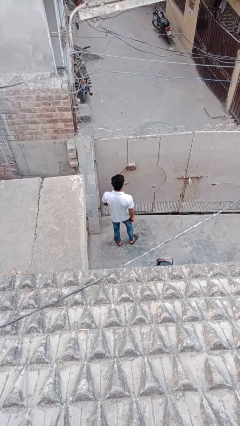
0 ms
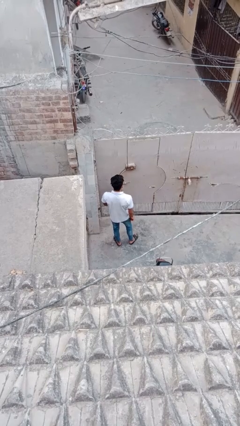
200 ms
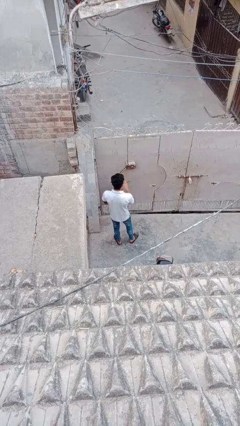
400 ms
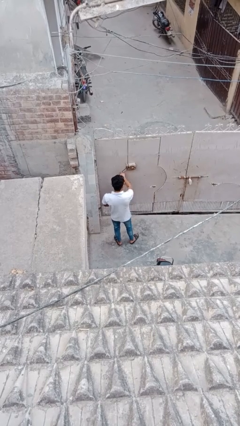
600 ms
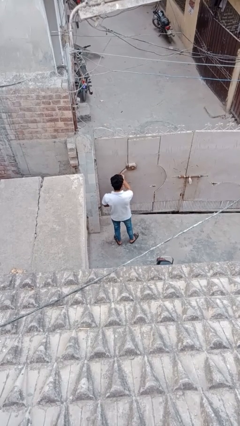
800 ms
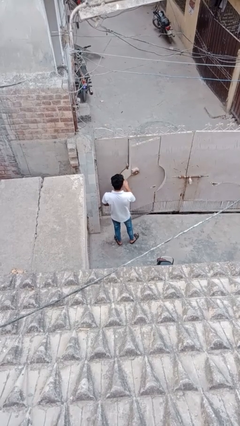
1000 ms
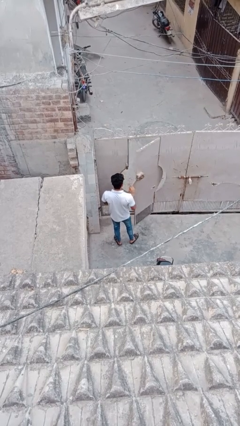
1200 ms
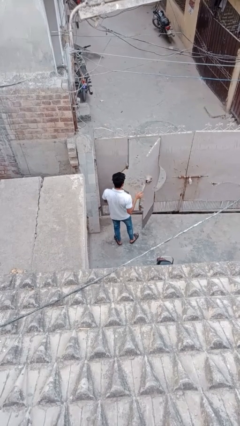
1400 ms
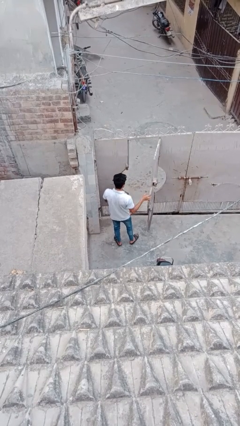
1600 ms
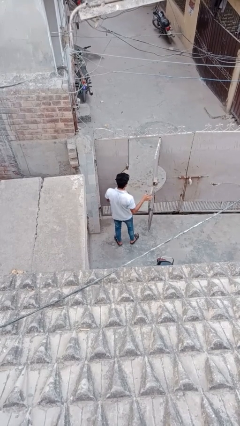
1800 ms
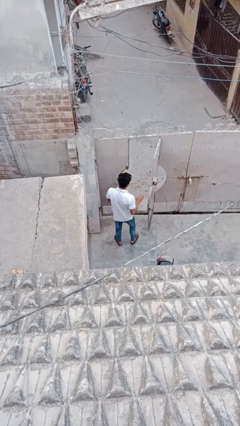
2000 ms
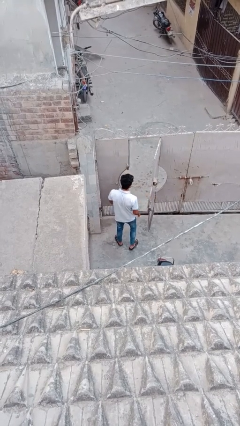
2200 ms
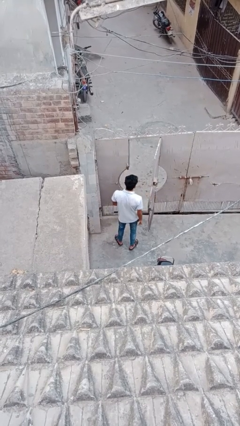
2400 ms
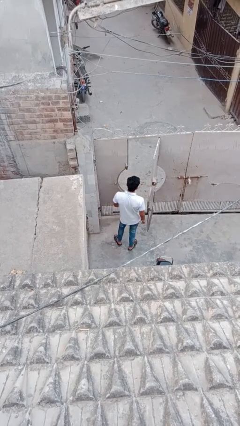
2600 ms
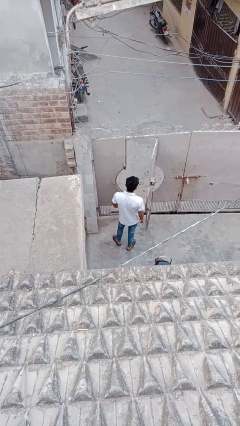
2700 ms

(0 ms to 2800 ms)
person opens facility door

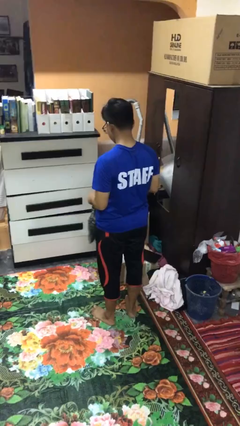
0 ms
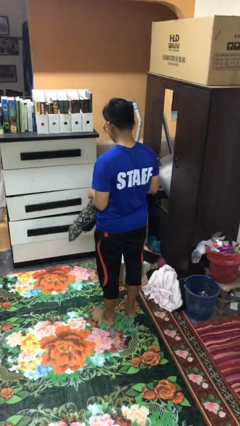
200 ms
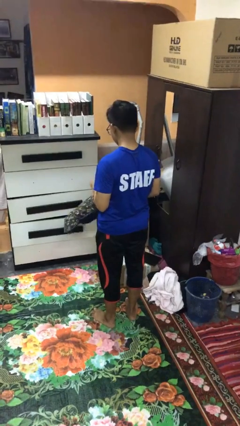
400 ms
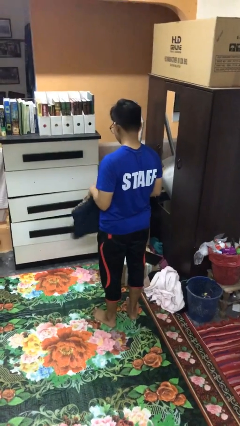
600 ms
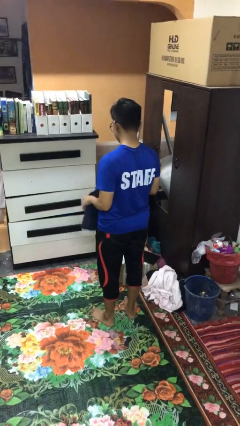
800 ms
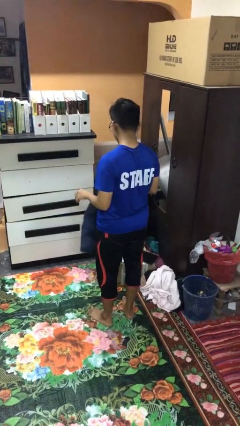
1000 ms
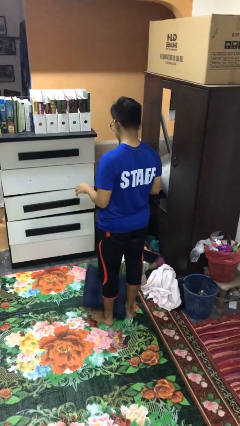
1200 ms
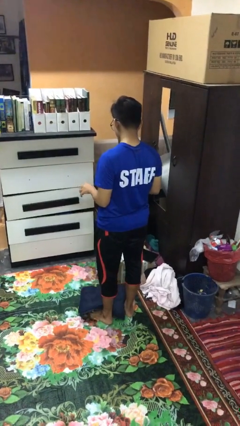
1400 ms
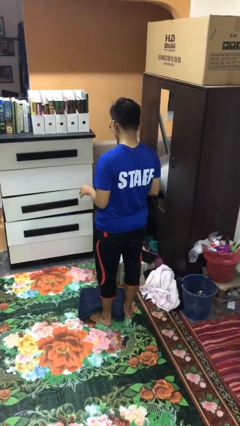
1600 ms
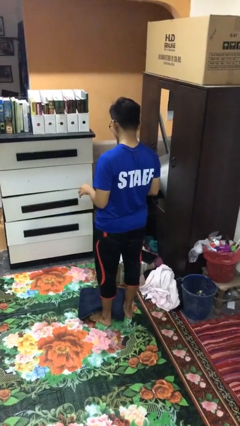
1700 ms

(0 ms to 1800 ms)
person drops object

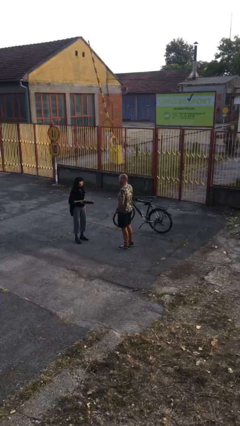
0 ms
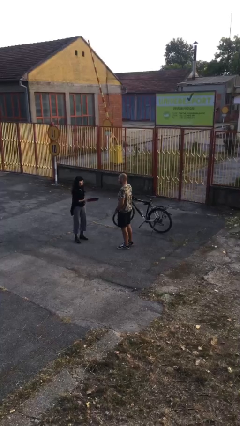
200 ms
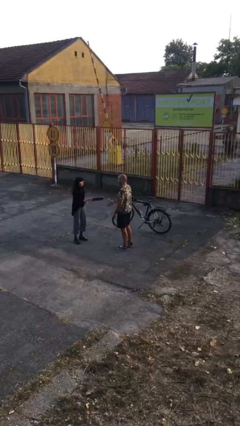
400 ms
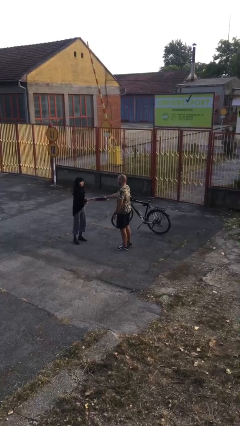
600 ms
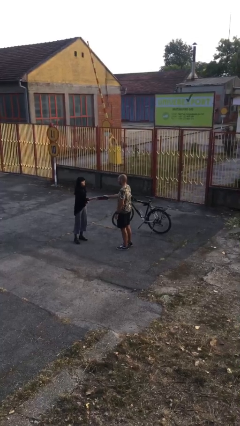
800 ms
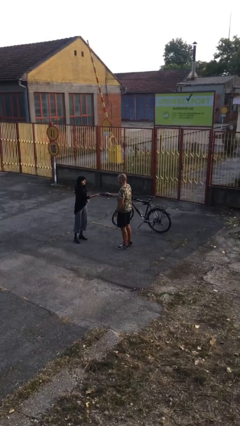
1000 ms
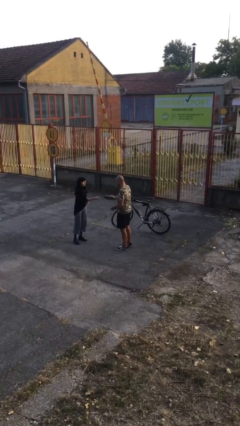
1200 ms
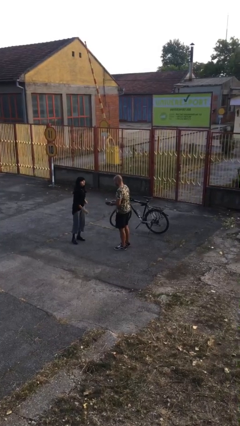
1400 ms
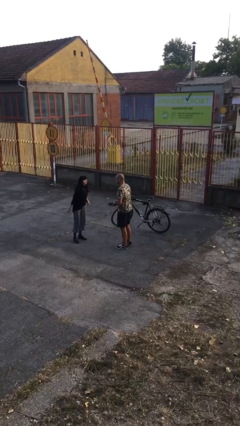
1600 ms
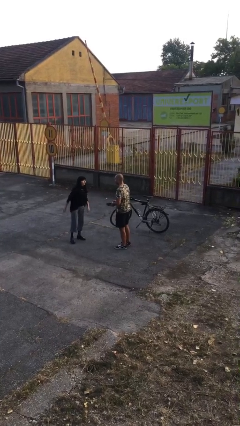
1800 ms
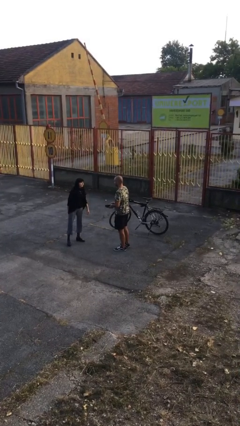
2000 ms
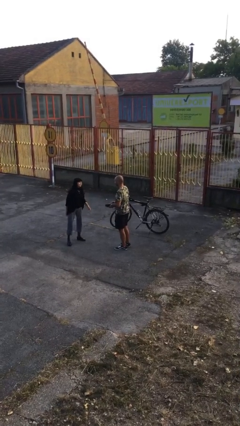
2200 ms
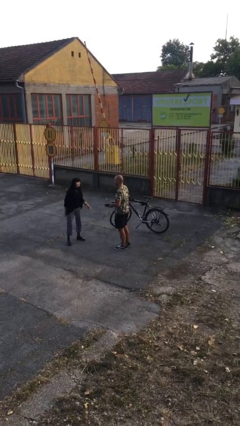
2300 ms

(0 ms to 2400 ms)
person transfers object to person

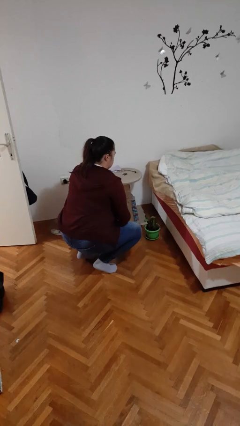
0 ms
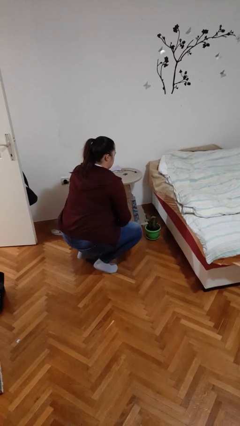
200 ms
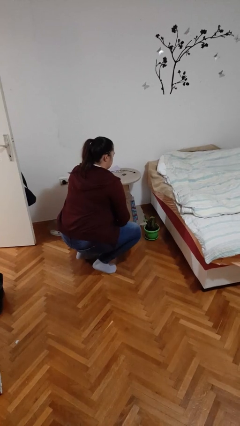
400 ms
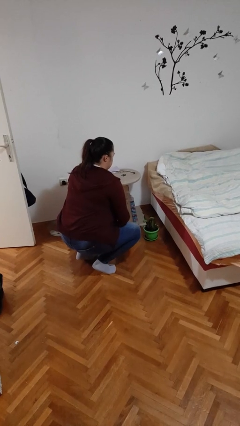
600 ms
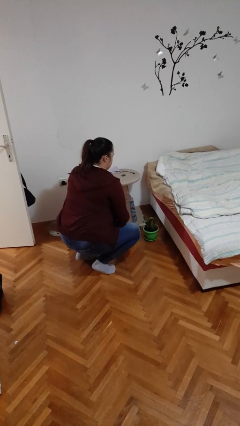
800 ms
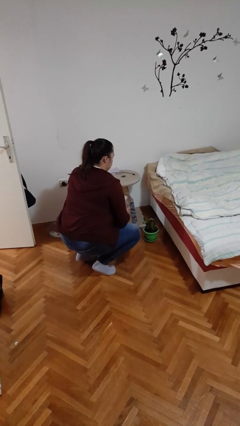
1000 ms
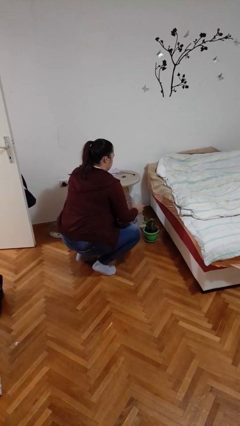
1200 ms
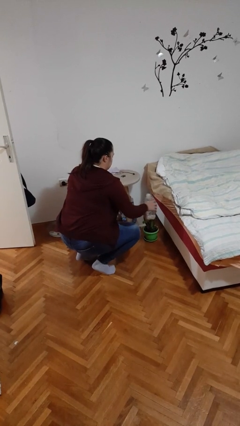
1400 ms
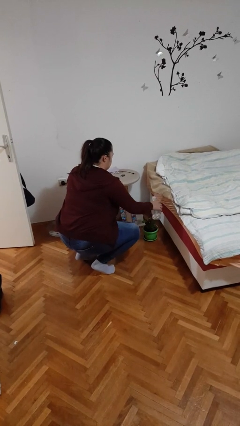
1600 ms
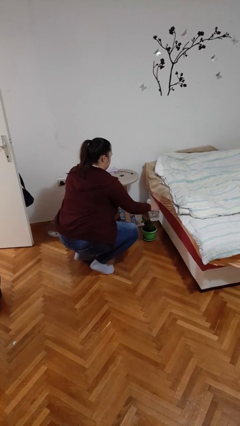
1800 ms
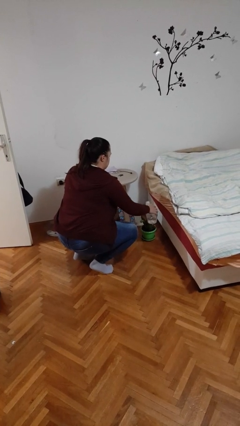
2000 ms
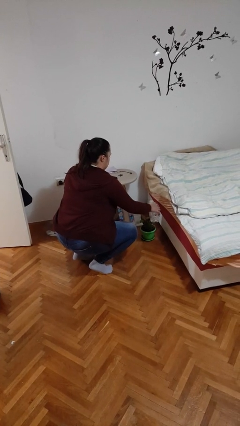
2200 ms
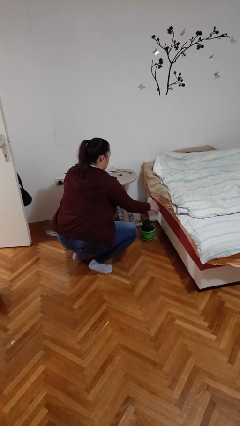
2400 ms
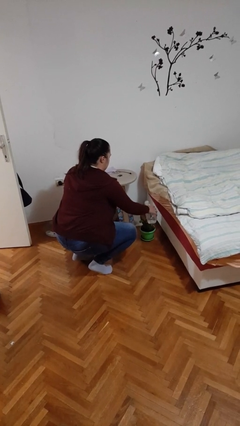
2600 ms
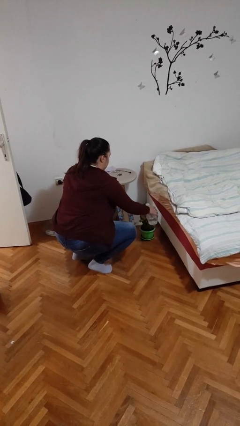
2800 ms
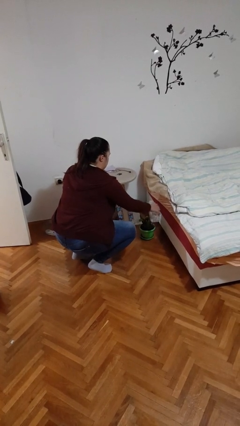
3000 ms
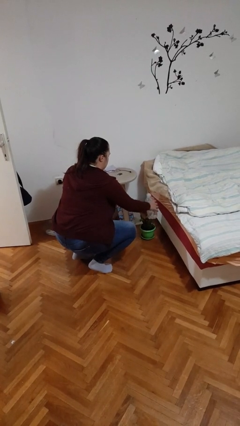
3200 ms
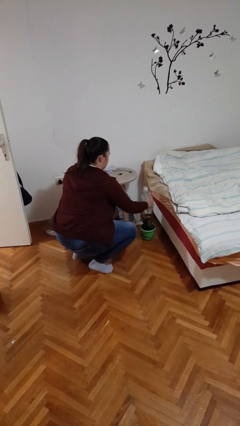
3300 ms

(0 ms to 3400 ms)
person waters houseplant

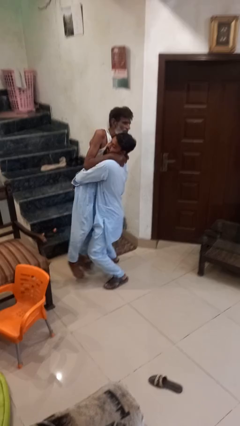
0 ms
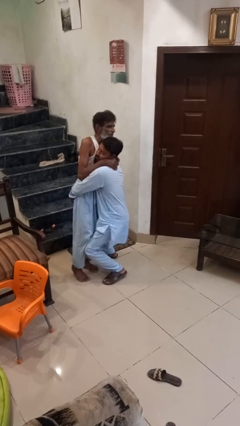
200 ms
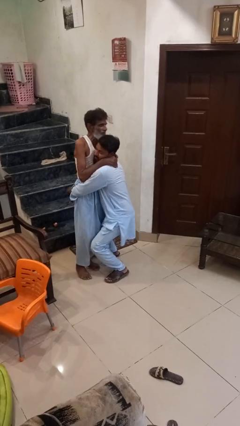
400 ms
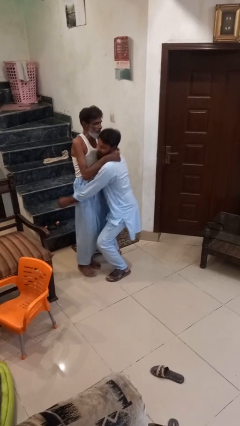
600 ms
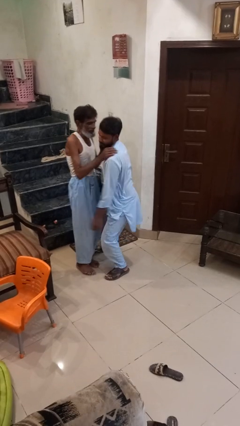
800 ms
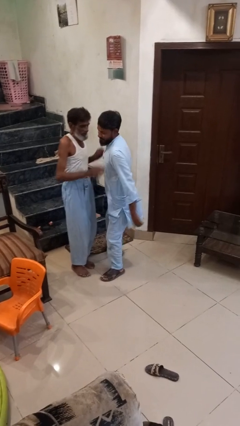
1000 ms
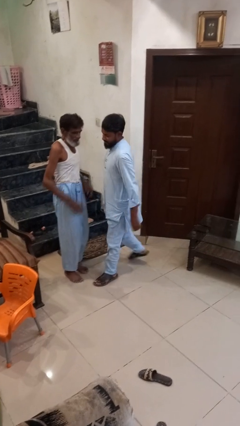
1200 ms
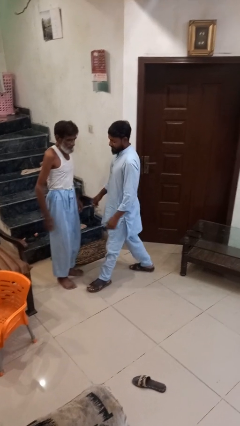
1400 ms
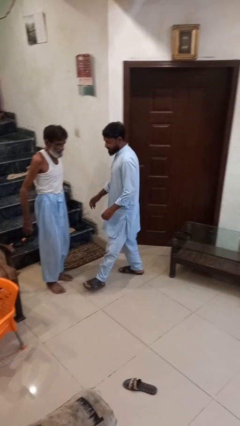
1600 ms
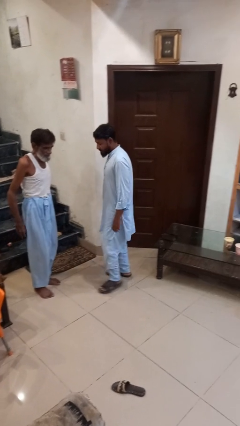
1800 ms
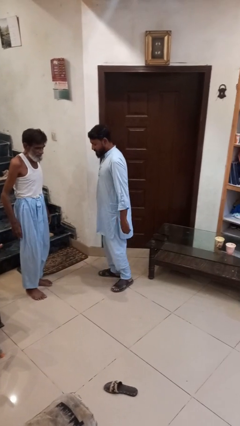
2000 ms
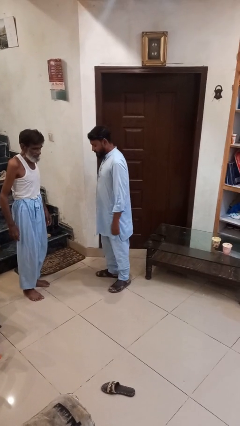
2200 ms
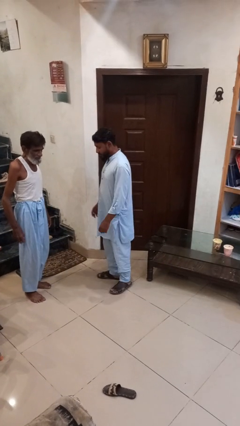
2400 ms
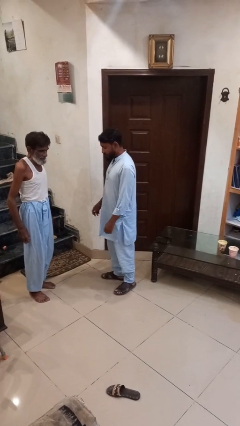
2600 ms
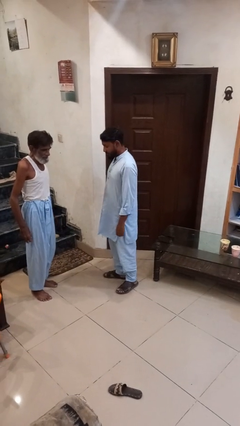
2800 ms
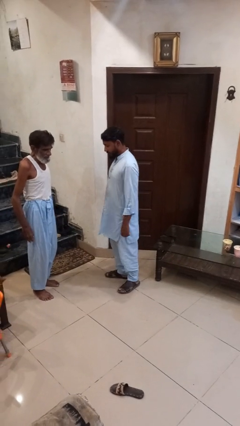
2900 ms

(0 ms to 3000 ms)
person puts down person

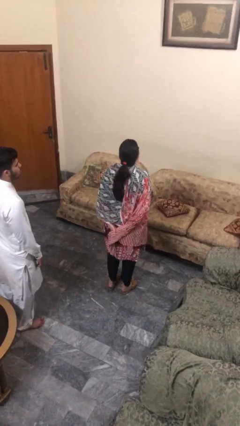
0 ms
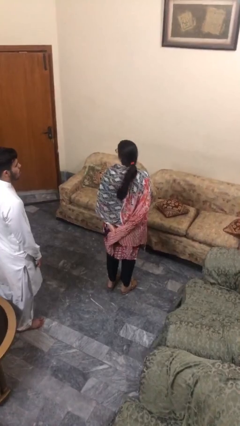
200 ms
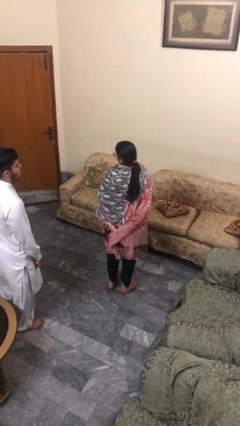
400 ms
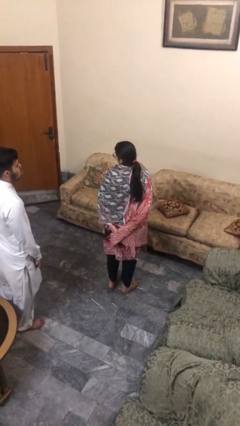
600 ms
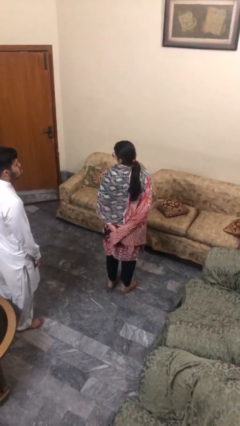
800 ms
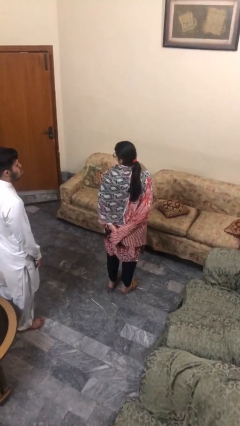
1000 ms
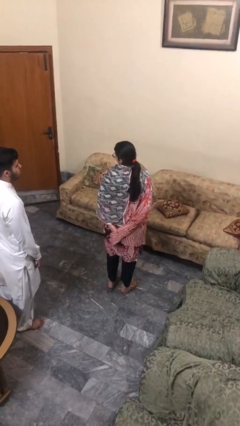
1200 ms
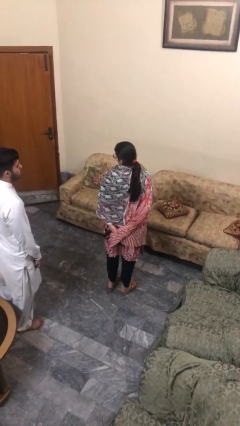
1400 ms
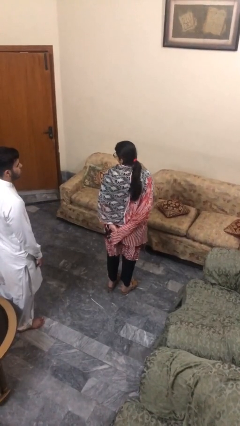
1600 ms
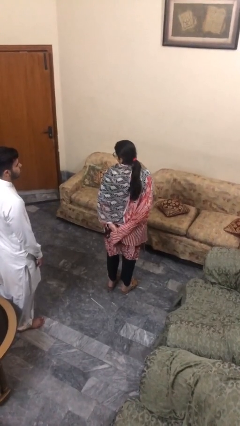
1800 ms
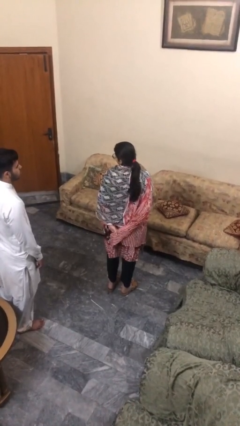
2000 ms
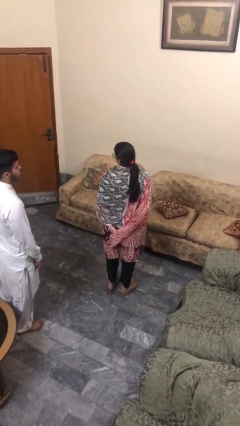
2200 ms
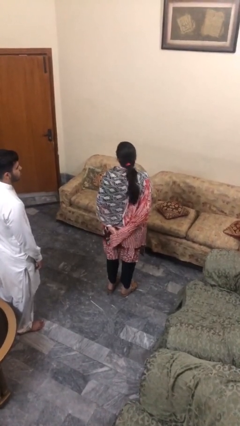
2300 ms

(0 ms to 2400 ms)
person looks over shoulder

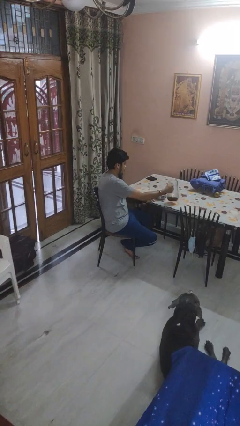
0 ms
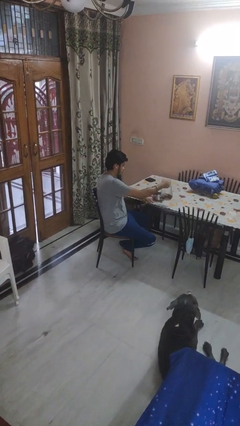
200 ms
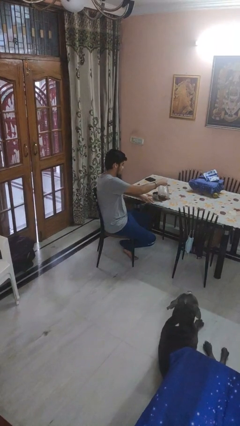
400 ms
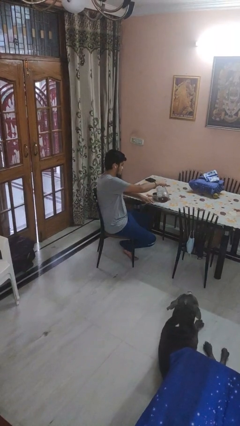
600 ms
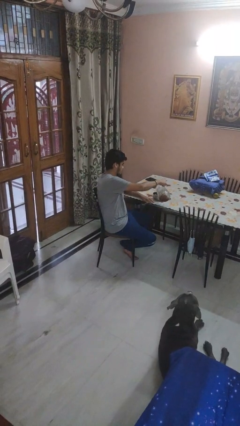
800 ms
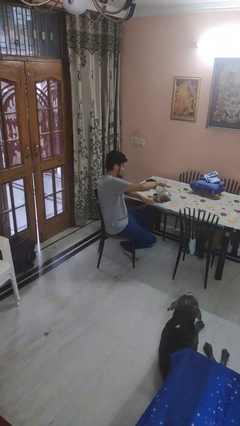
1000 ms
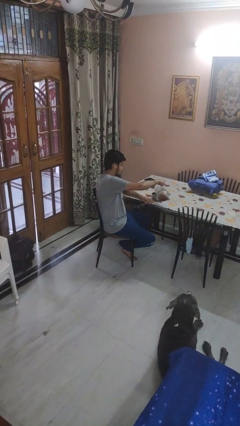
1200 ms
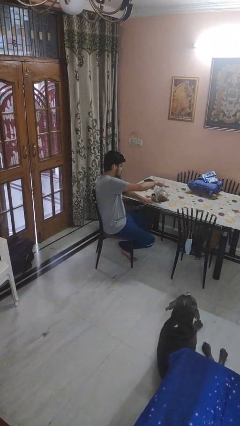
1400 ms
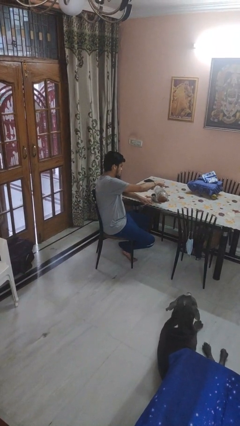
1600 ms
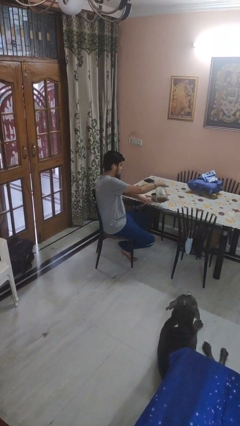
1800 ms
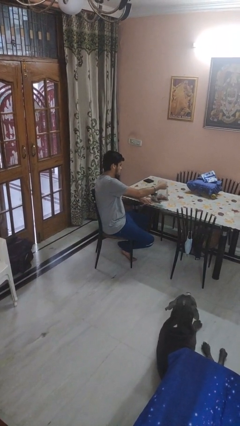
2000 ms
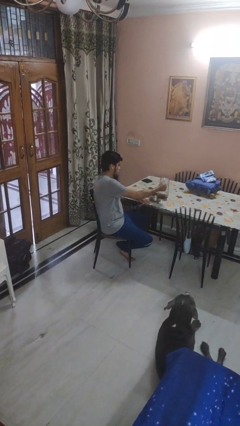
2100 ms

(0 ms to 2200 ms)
person pours into bowl
